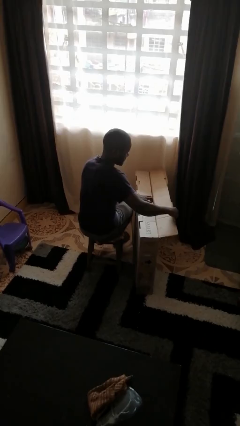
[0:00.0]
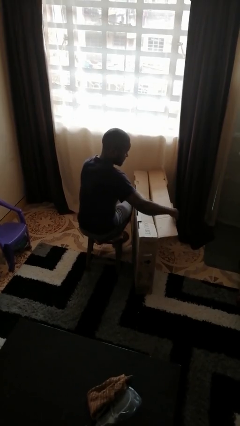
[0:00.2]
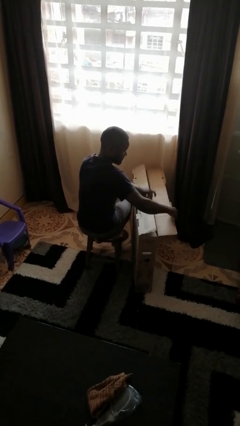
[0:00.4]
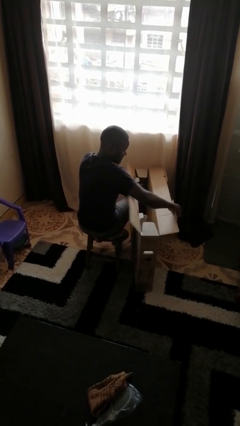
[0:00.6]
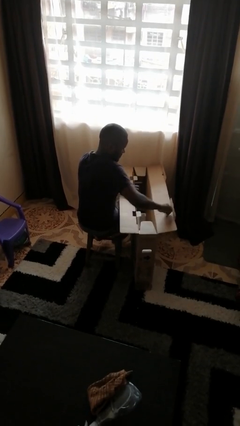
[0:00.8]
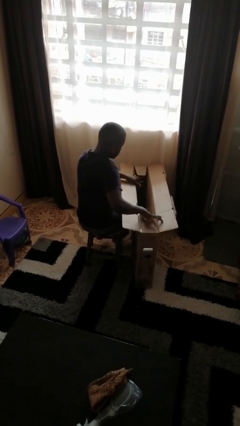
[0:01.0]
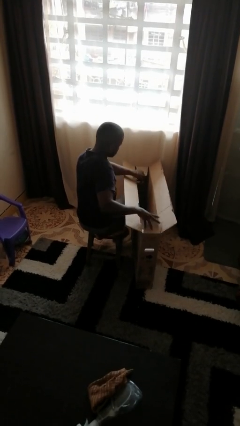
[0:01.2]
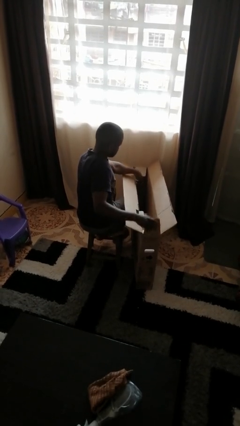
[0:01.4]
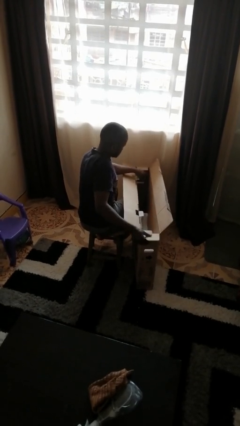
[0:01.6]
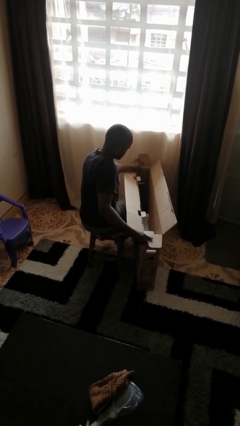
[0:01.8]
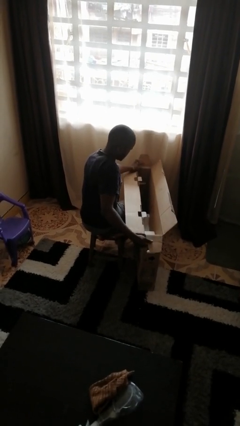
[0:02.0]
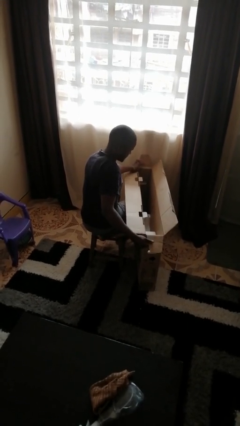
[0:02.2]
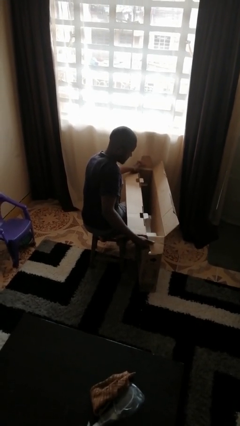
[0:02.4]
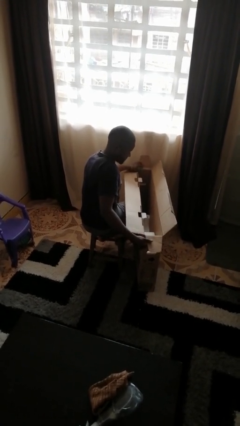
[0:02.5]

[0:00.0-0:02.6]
person opens box

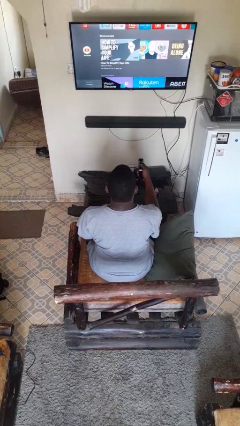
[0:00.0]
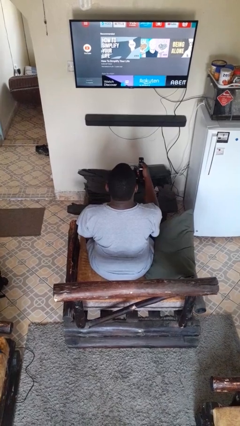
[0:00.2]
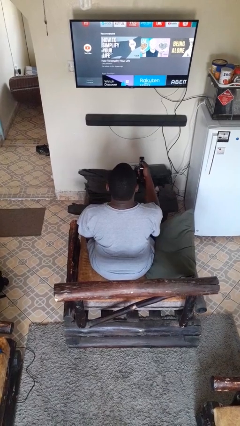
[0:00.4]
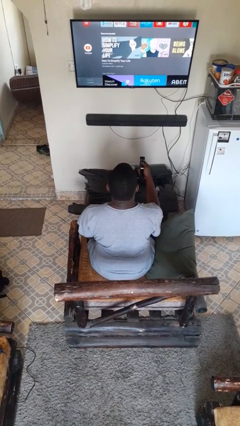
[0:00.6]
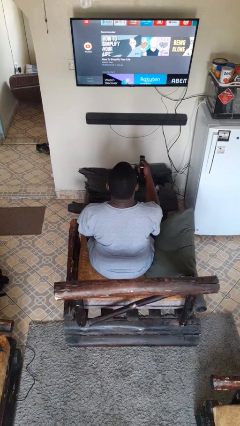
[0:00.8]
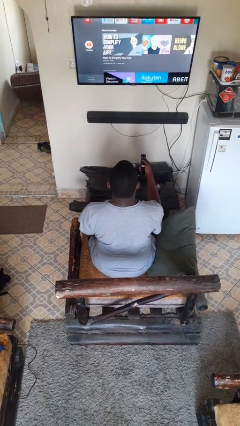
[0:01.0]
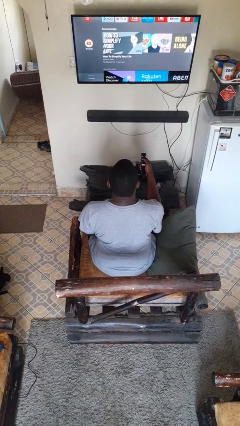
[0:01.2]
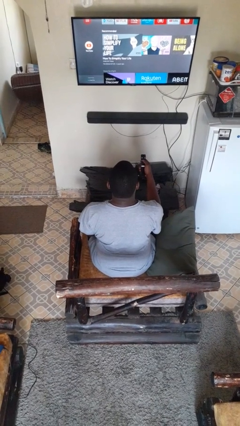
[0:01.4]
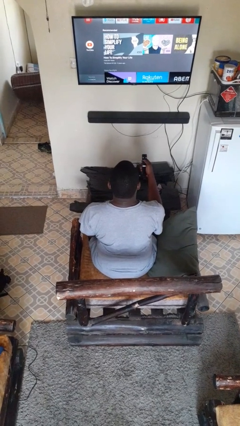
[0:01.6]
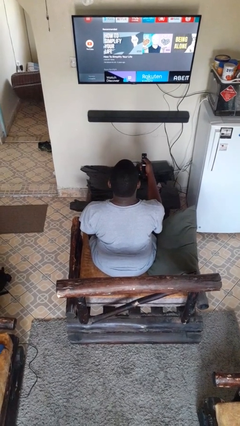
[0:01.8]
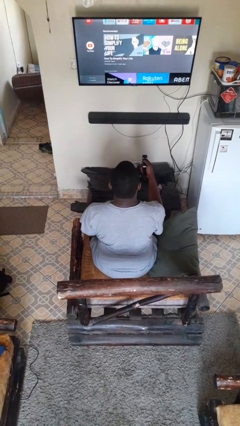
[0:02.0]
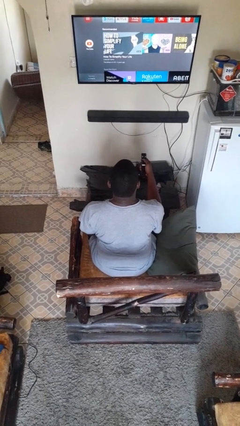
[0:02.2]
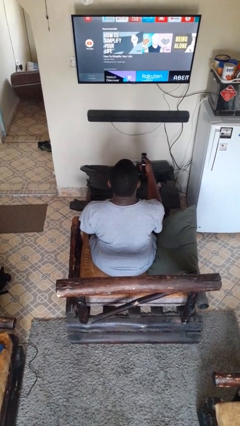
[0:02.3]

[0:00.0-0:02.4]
person uses television remote

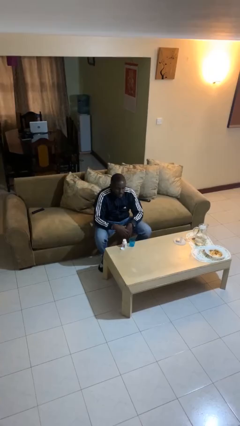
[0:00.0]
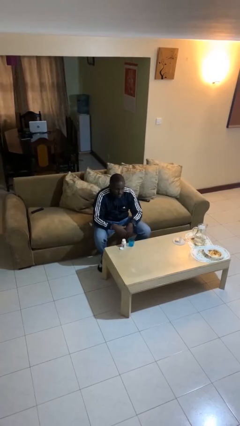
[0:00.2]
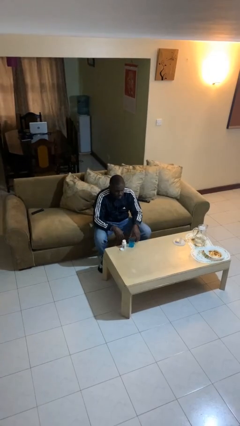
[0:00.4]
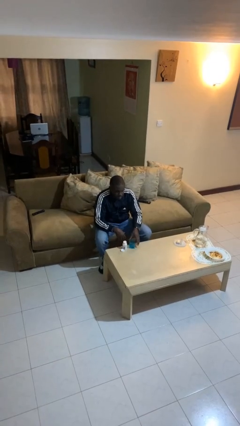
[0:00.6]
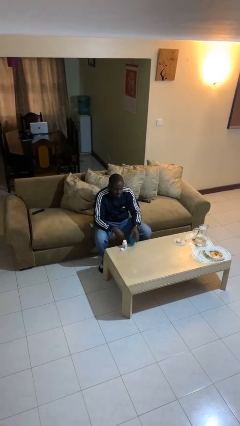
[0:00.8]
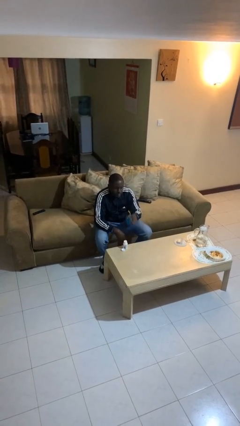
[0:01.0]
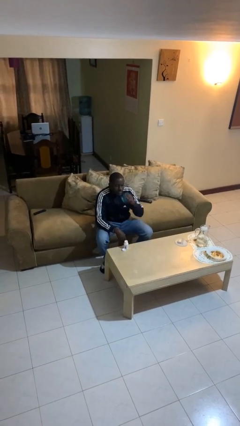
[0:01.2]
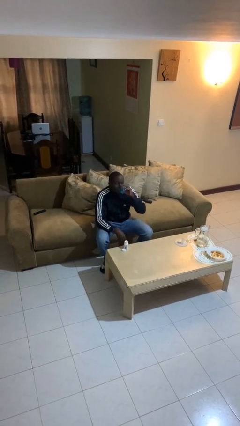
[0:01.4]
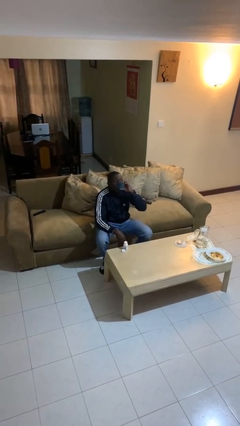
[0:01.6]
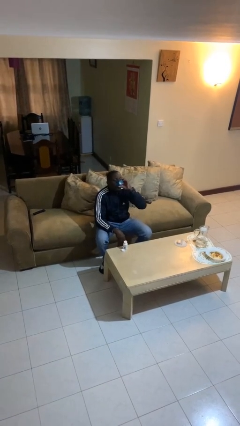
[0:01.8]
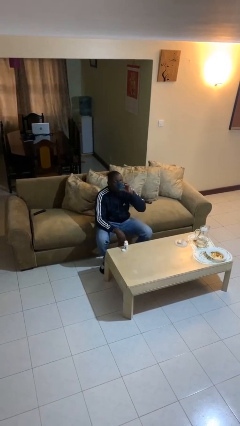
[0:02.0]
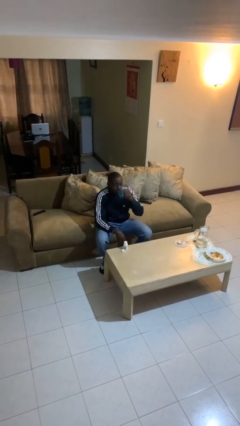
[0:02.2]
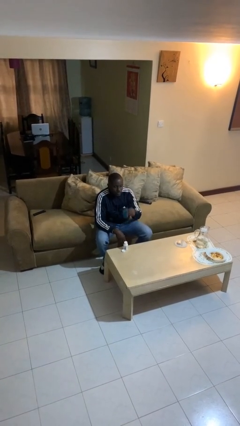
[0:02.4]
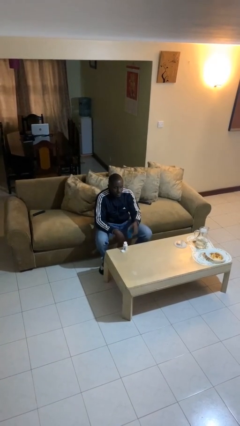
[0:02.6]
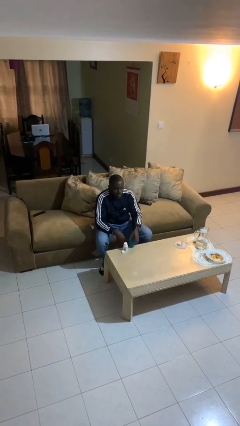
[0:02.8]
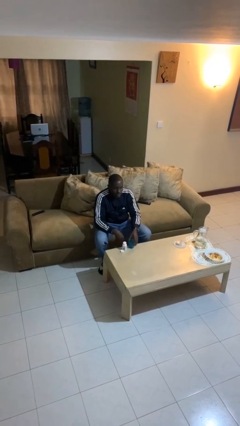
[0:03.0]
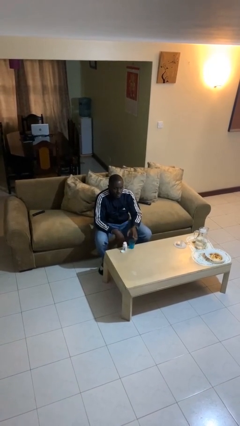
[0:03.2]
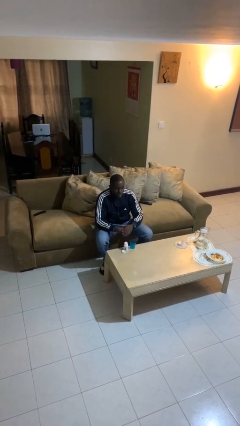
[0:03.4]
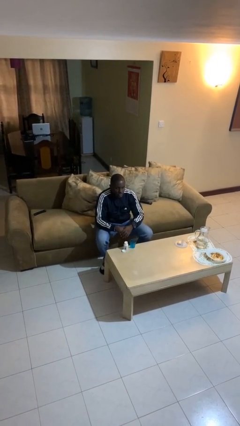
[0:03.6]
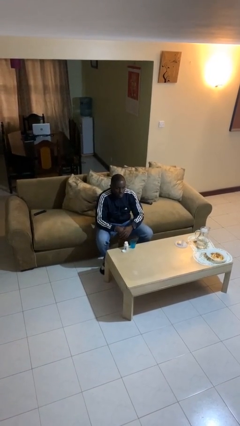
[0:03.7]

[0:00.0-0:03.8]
person drinks from cup

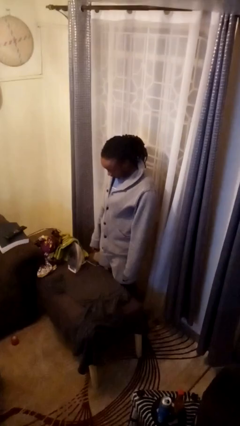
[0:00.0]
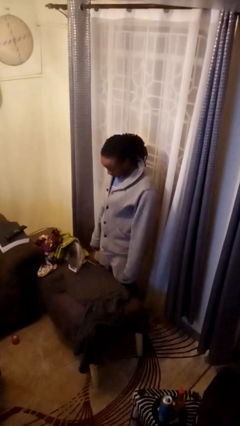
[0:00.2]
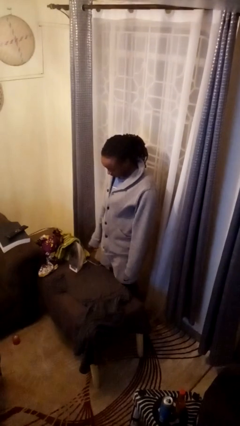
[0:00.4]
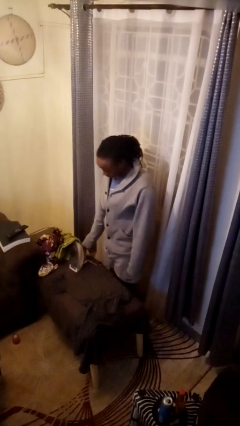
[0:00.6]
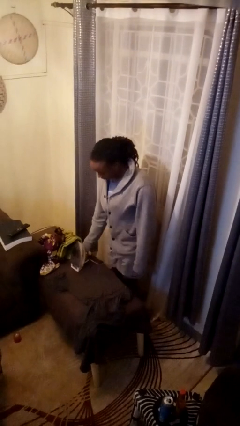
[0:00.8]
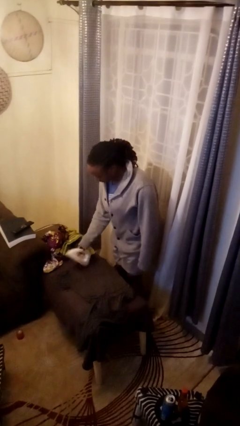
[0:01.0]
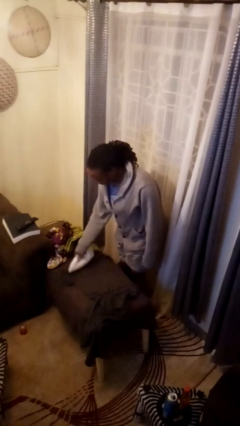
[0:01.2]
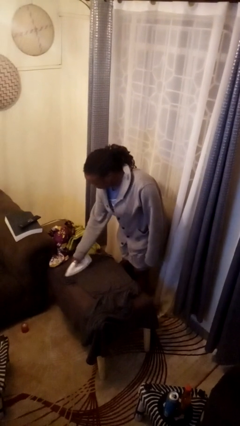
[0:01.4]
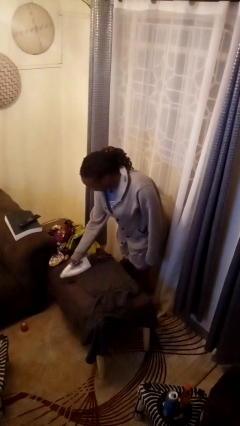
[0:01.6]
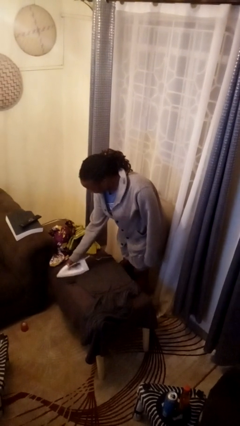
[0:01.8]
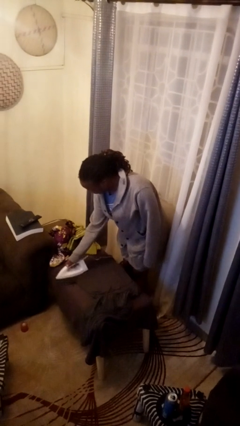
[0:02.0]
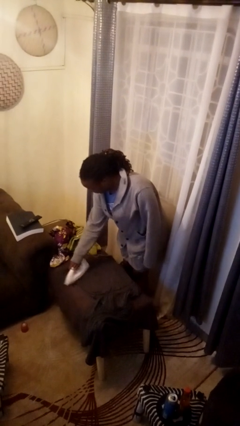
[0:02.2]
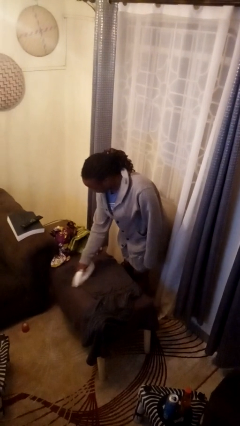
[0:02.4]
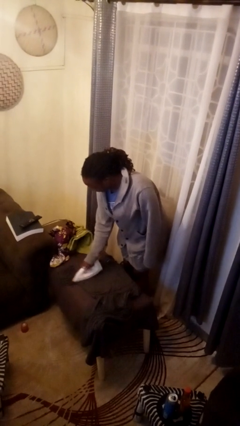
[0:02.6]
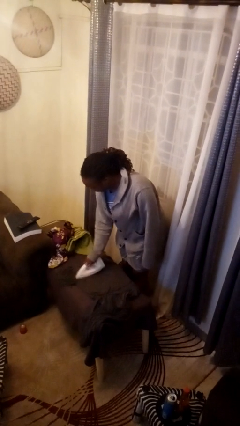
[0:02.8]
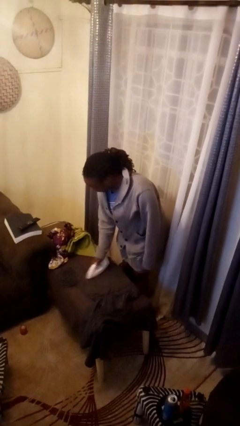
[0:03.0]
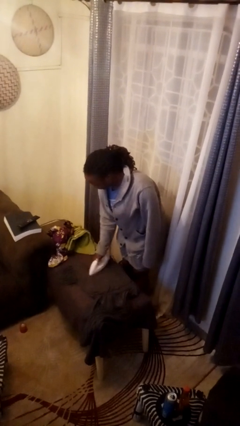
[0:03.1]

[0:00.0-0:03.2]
person irons clothes

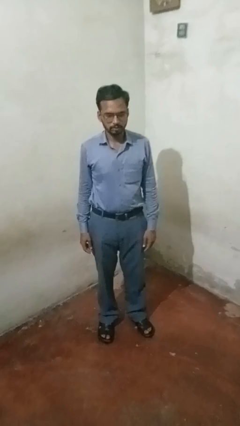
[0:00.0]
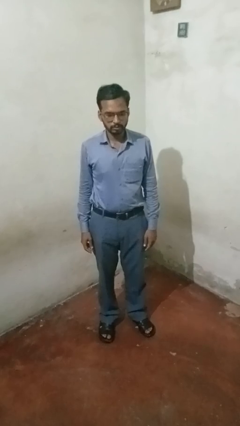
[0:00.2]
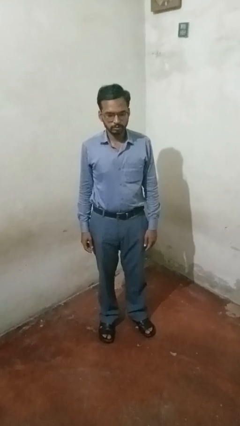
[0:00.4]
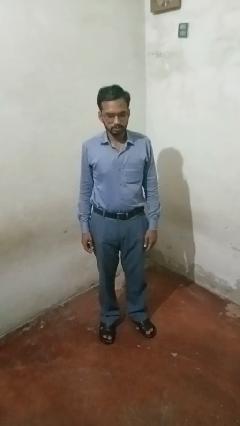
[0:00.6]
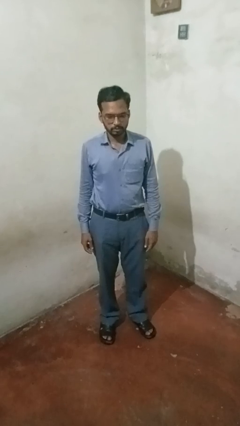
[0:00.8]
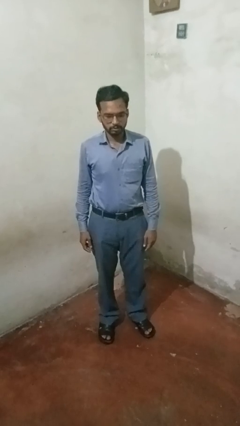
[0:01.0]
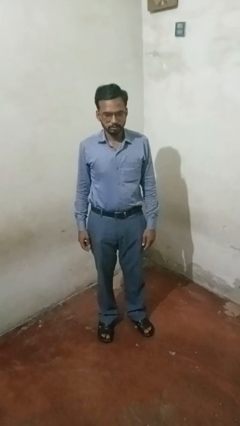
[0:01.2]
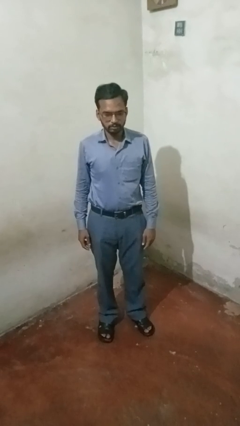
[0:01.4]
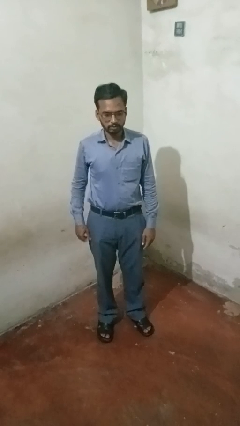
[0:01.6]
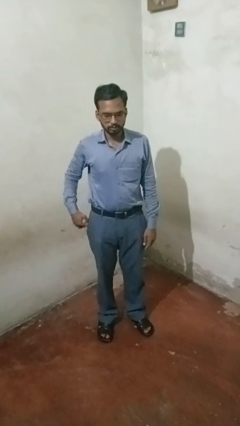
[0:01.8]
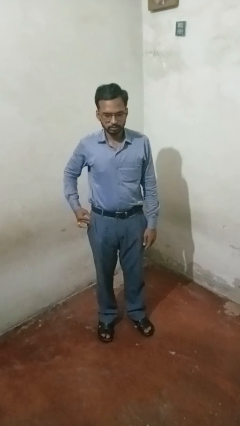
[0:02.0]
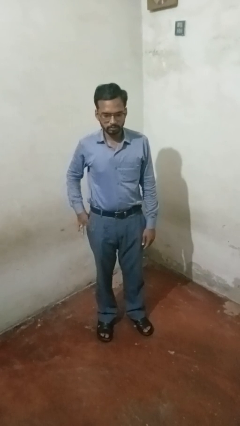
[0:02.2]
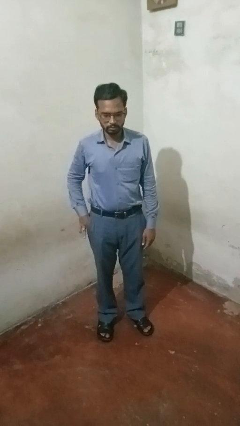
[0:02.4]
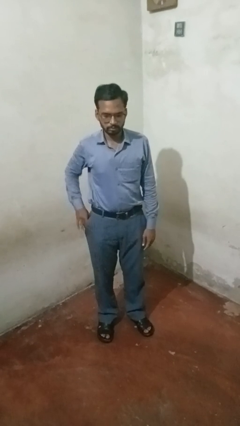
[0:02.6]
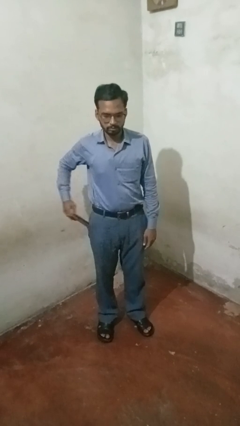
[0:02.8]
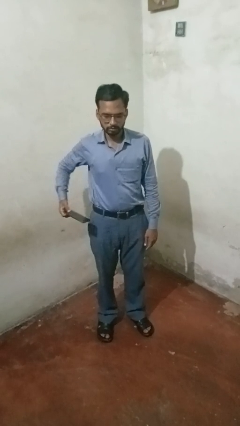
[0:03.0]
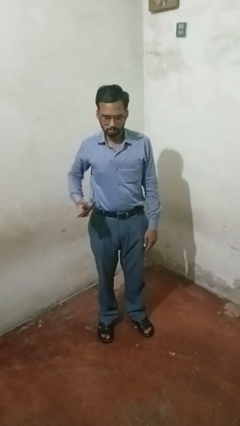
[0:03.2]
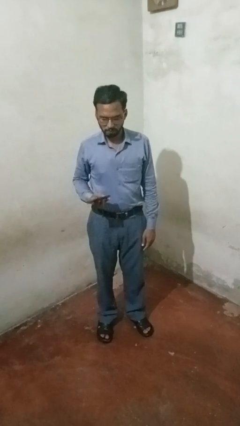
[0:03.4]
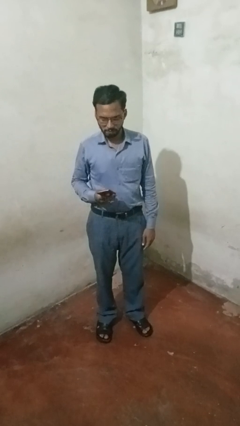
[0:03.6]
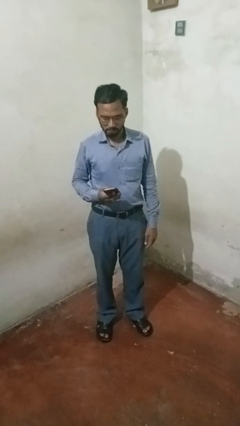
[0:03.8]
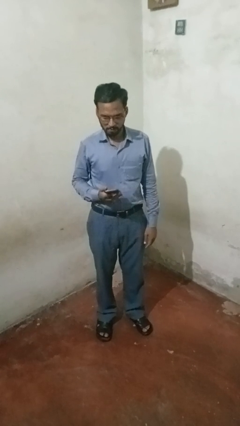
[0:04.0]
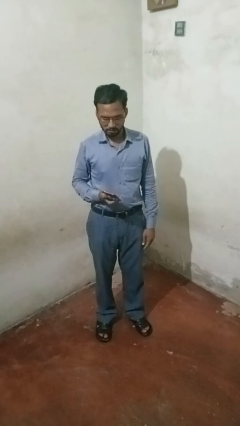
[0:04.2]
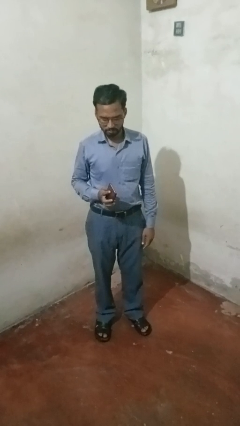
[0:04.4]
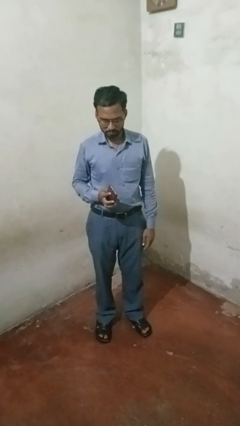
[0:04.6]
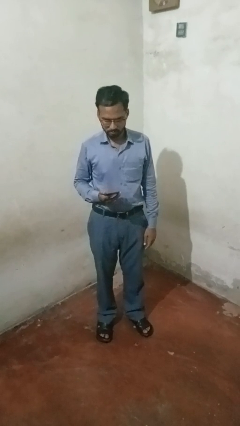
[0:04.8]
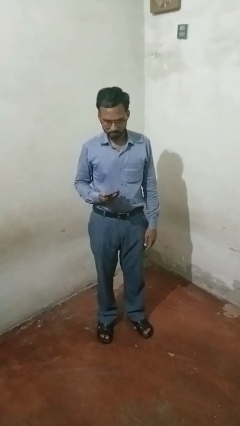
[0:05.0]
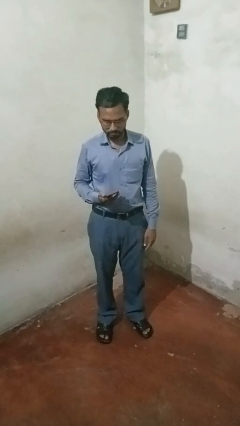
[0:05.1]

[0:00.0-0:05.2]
person takes phone from pocket
